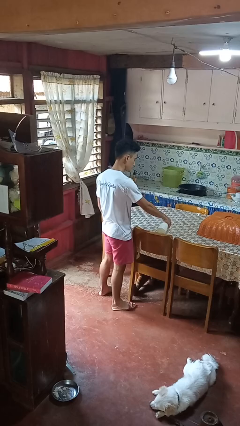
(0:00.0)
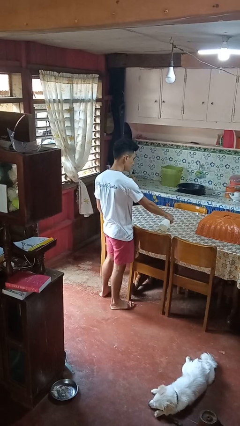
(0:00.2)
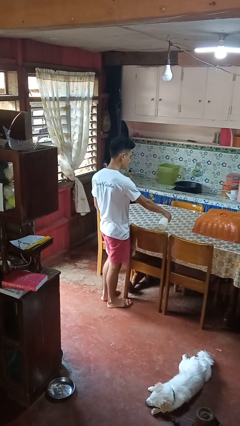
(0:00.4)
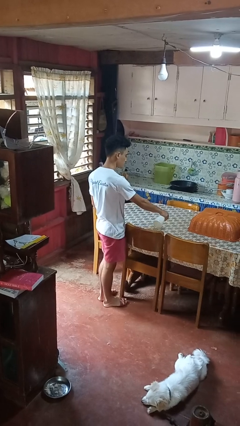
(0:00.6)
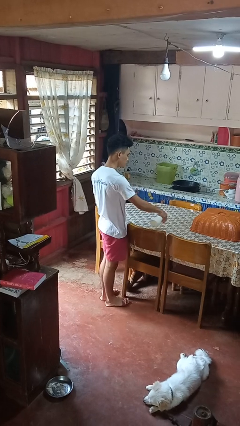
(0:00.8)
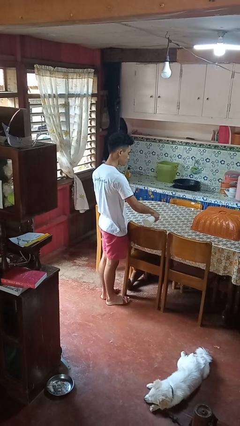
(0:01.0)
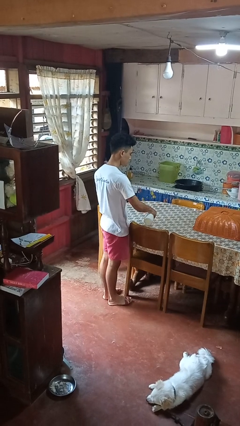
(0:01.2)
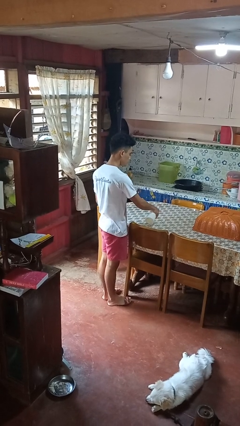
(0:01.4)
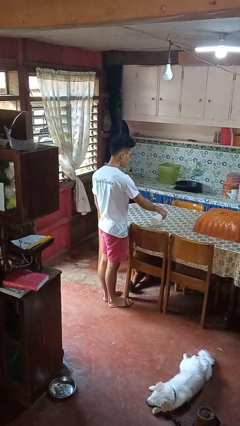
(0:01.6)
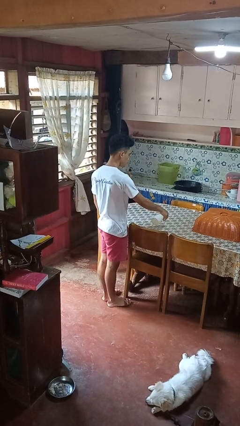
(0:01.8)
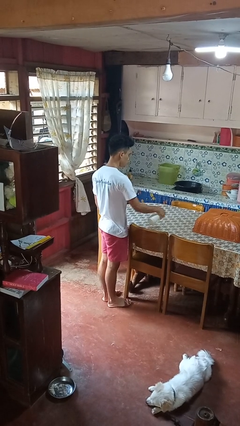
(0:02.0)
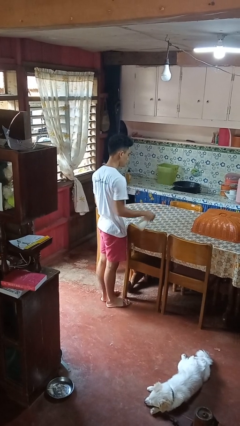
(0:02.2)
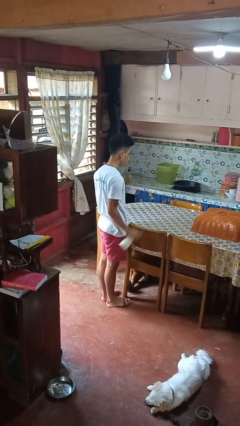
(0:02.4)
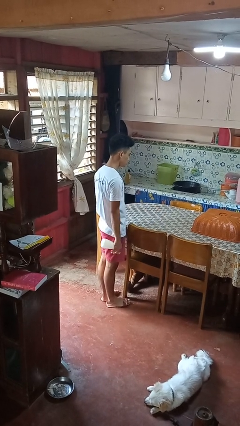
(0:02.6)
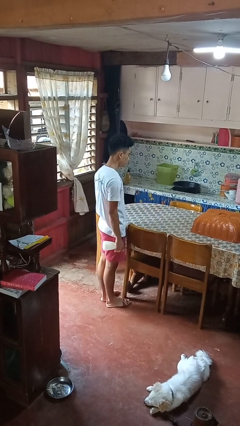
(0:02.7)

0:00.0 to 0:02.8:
person sprays from bottle

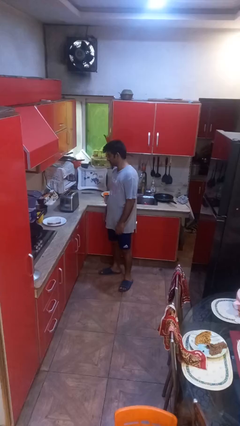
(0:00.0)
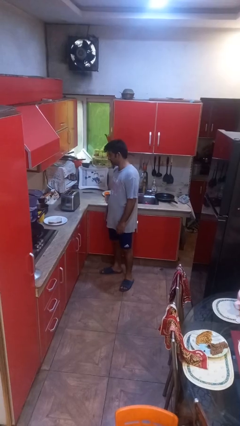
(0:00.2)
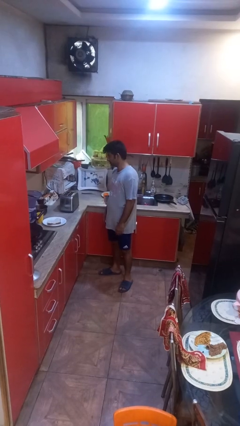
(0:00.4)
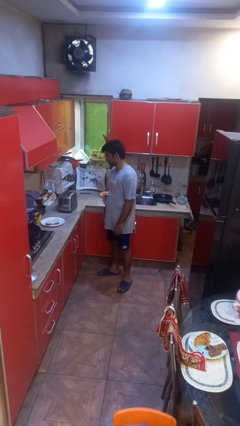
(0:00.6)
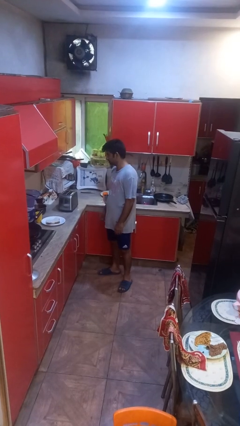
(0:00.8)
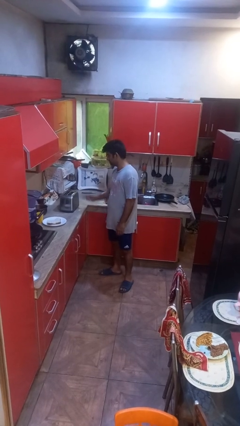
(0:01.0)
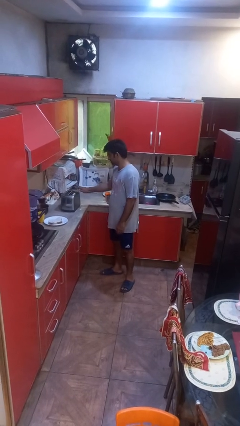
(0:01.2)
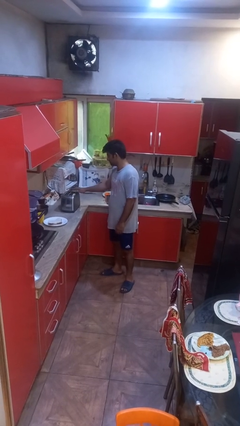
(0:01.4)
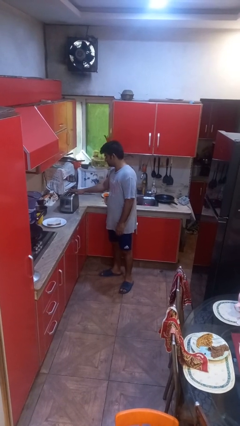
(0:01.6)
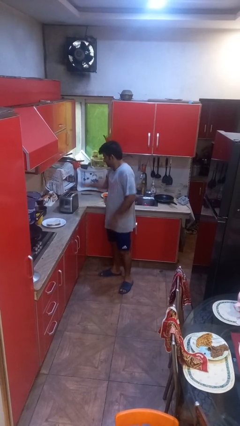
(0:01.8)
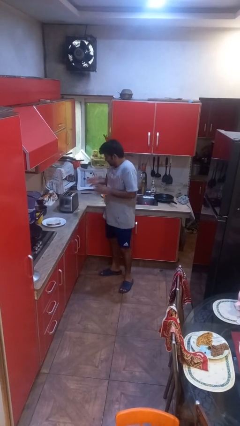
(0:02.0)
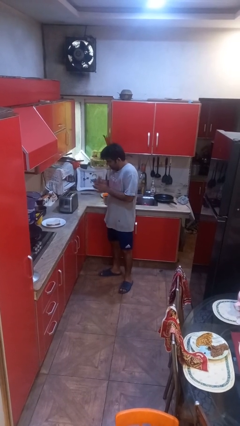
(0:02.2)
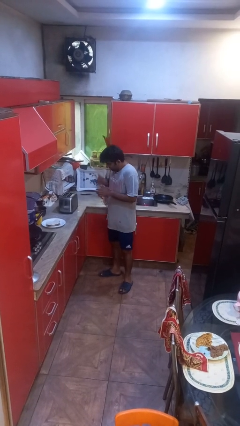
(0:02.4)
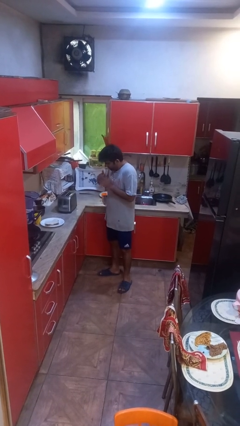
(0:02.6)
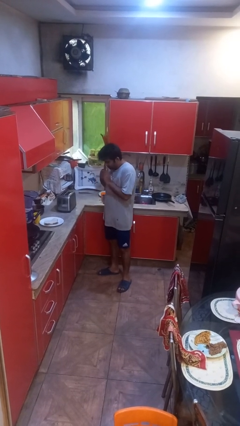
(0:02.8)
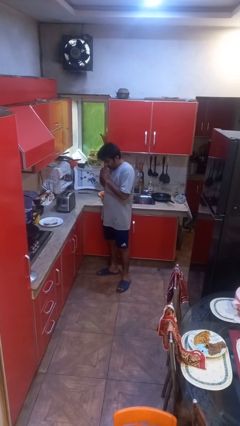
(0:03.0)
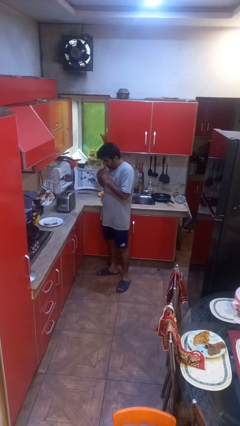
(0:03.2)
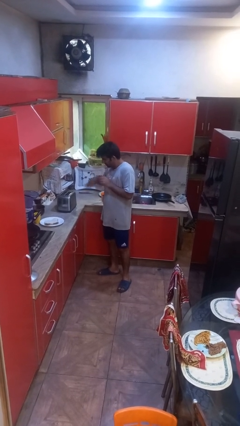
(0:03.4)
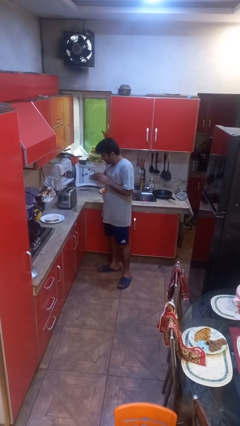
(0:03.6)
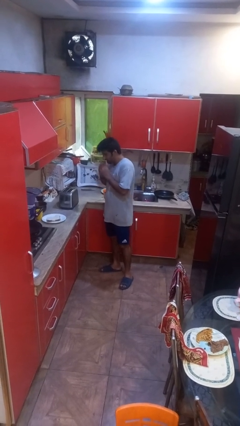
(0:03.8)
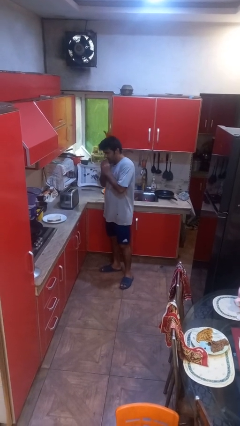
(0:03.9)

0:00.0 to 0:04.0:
person burns hand

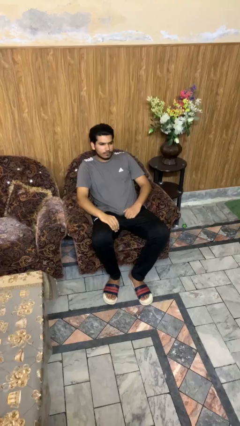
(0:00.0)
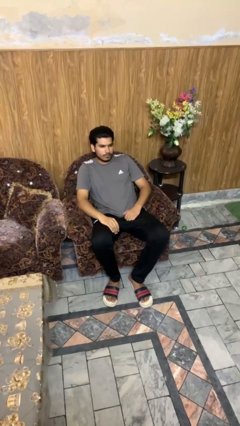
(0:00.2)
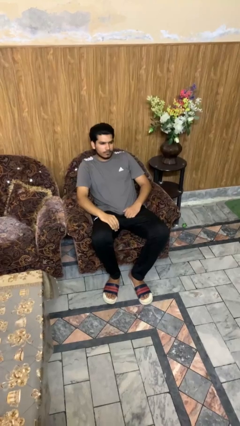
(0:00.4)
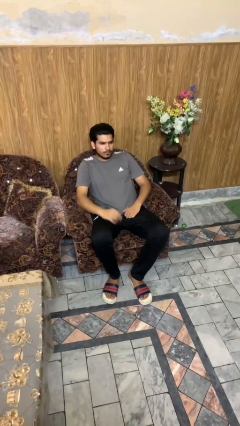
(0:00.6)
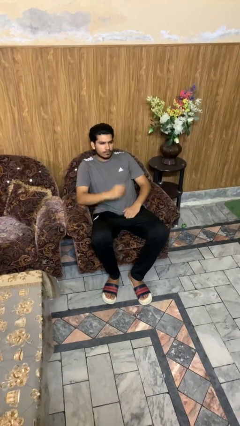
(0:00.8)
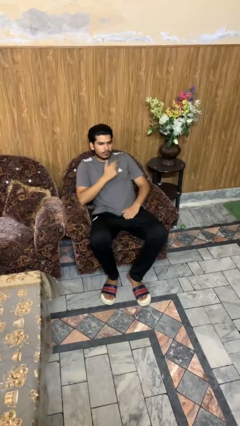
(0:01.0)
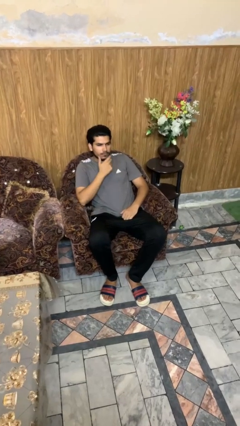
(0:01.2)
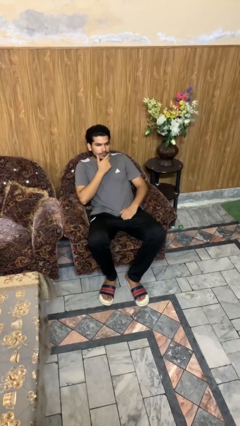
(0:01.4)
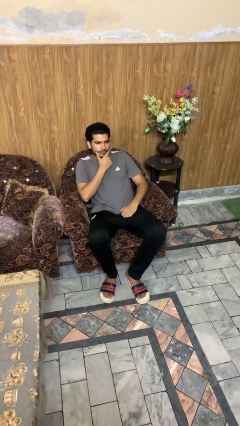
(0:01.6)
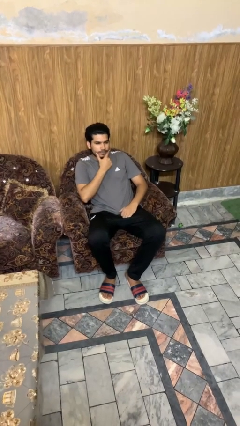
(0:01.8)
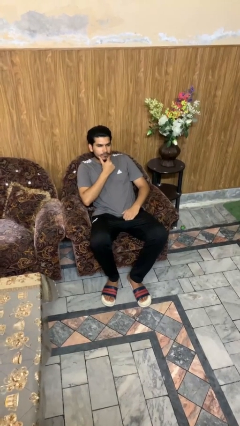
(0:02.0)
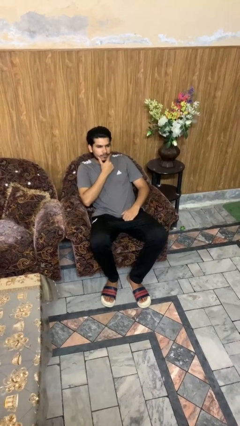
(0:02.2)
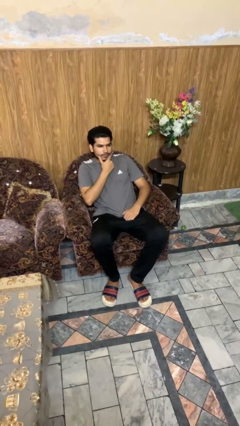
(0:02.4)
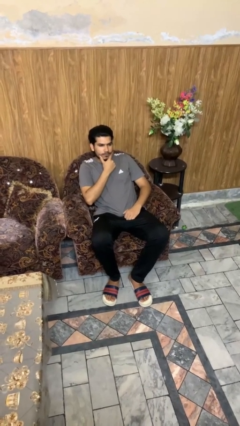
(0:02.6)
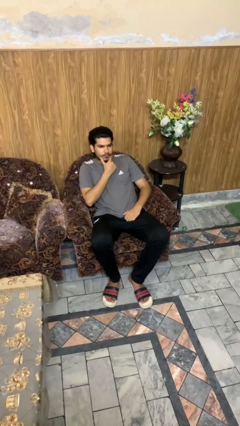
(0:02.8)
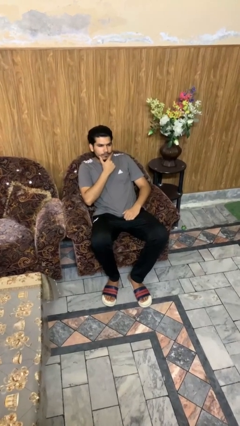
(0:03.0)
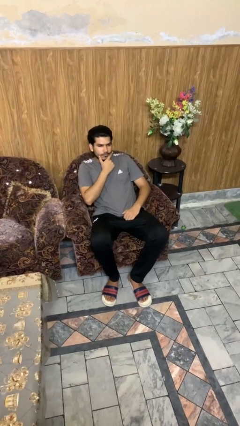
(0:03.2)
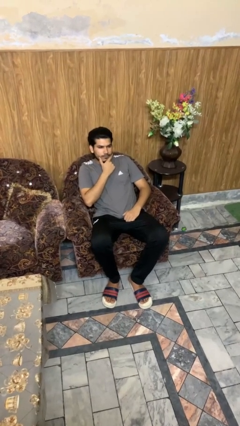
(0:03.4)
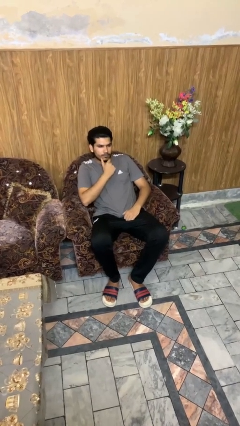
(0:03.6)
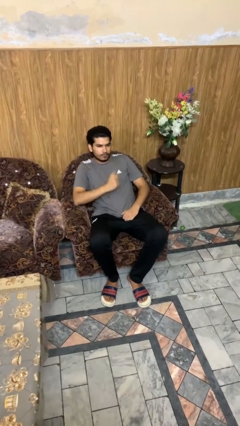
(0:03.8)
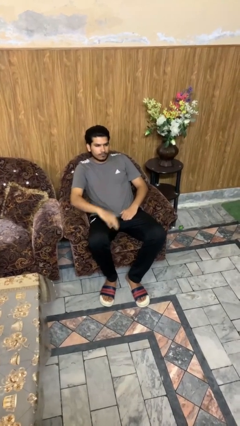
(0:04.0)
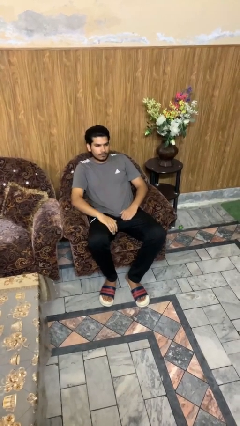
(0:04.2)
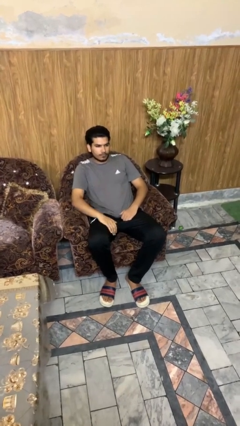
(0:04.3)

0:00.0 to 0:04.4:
person strokes chin

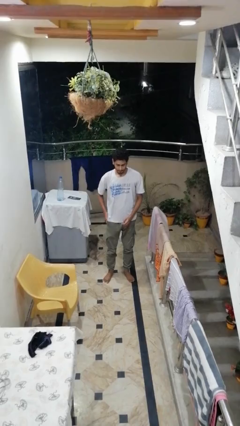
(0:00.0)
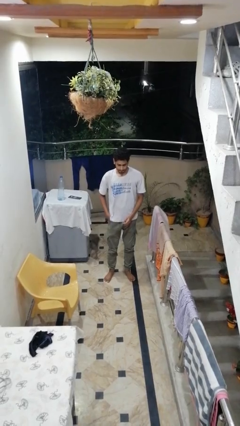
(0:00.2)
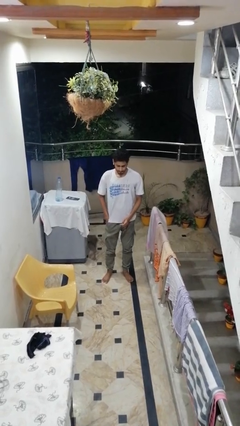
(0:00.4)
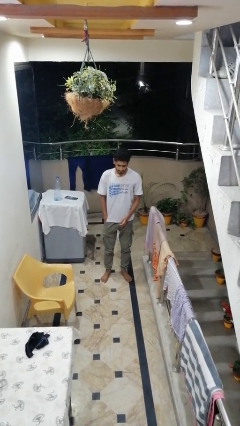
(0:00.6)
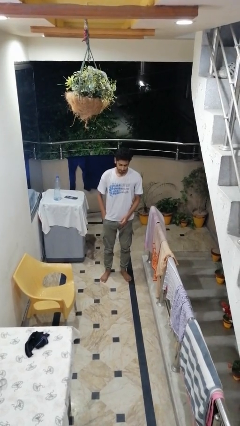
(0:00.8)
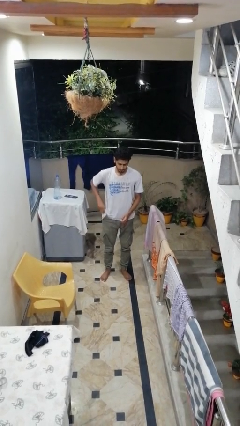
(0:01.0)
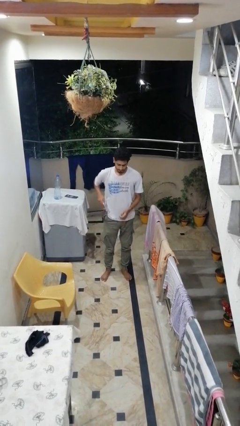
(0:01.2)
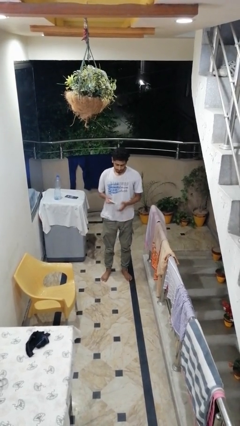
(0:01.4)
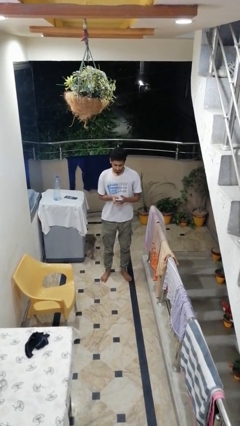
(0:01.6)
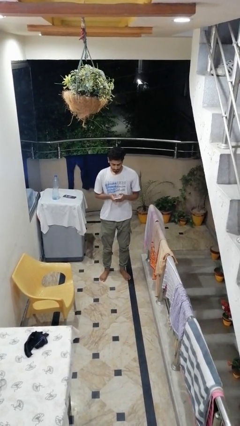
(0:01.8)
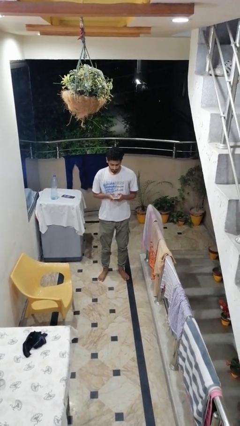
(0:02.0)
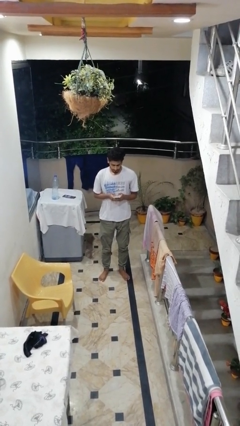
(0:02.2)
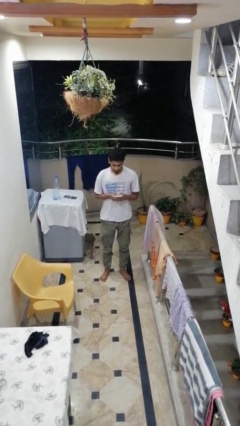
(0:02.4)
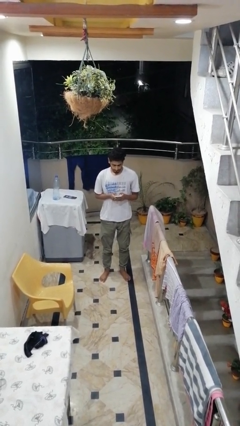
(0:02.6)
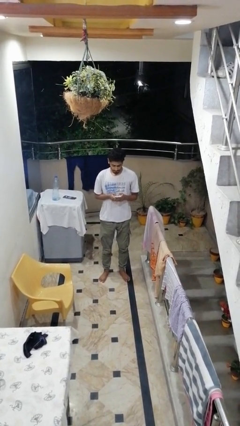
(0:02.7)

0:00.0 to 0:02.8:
person takes phone from pocket

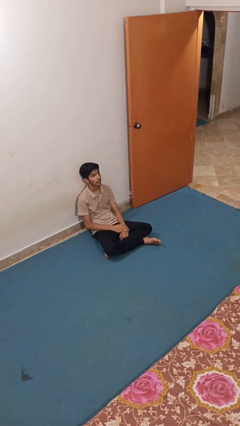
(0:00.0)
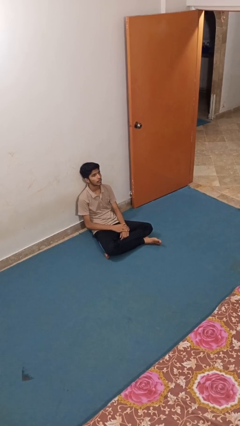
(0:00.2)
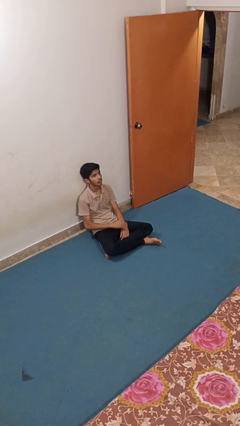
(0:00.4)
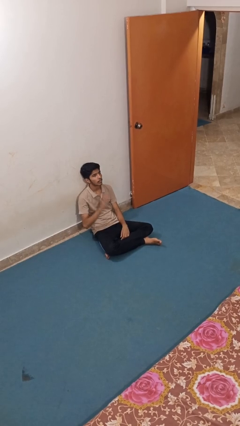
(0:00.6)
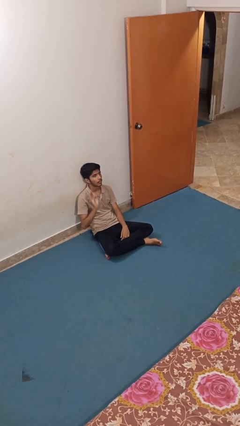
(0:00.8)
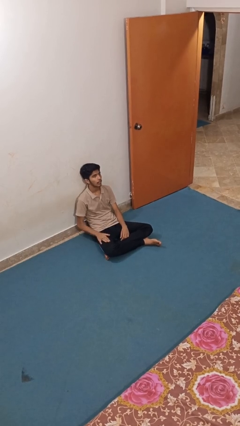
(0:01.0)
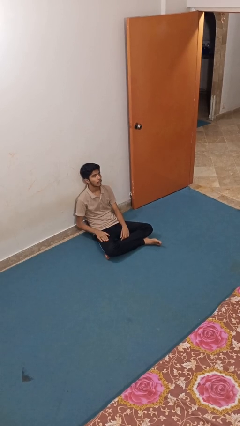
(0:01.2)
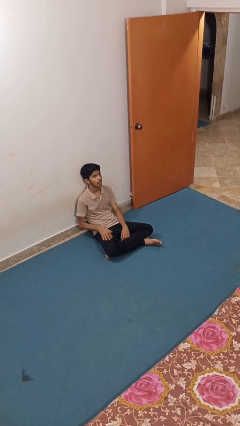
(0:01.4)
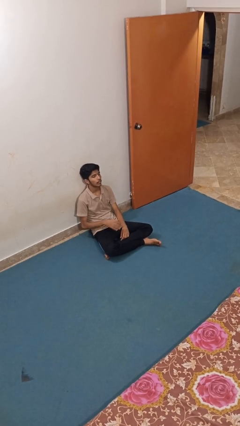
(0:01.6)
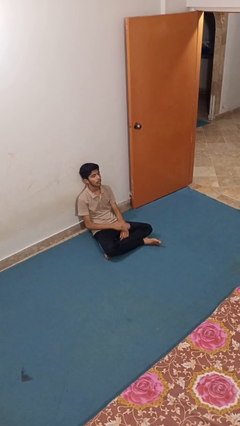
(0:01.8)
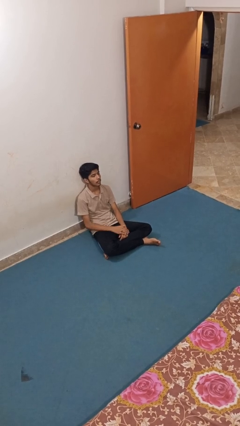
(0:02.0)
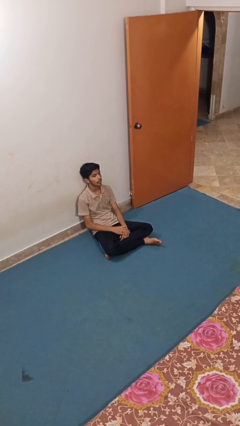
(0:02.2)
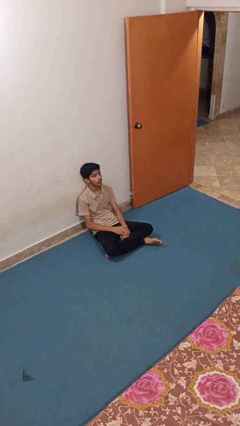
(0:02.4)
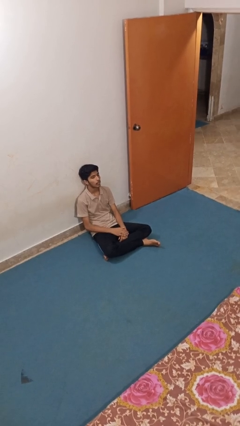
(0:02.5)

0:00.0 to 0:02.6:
person slaps hands on thighs

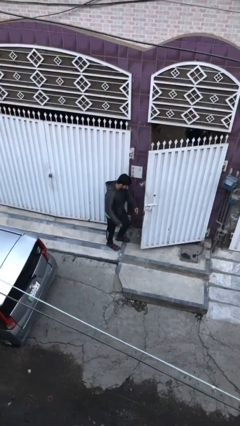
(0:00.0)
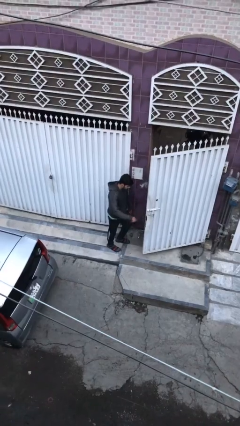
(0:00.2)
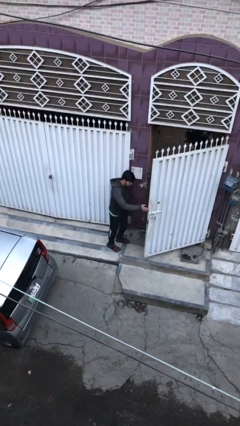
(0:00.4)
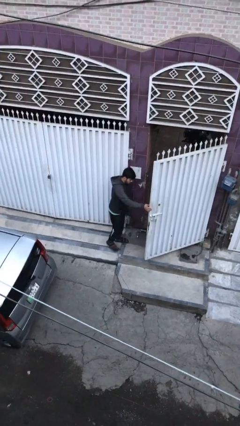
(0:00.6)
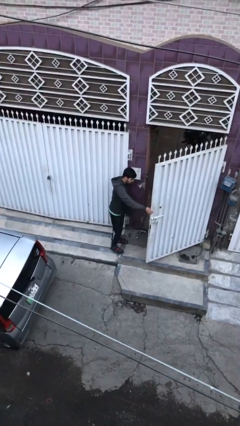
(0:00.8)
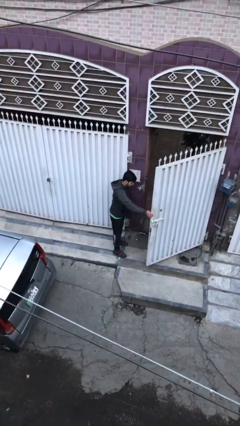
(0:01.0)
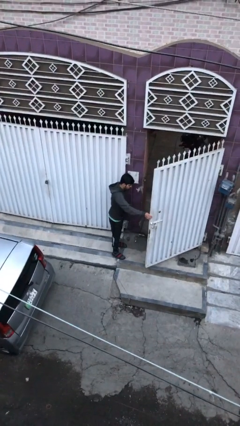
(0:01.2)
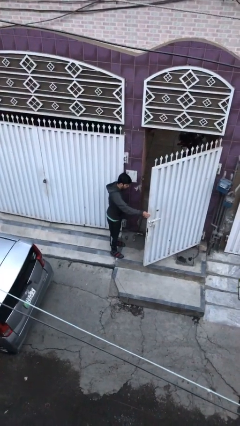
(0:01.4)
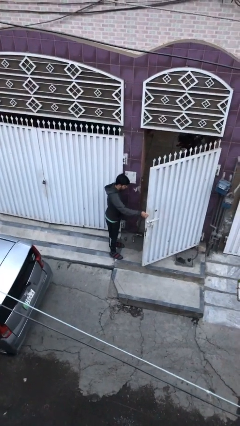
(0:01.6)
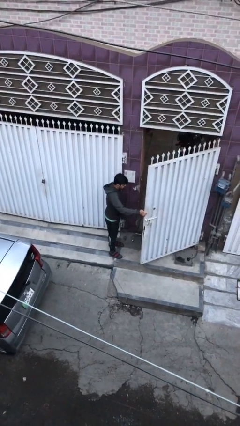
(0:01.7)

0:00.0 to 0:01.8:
person opens facility door
